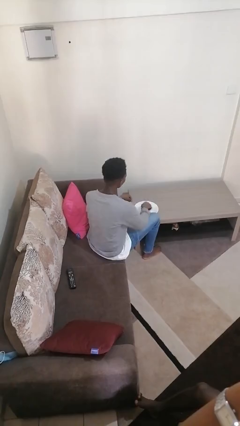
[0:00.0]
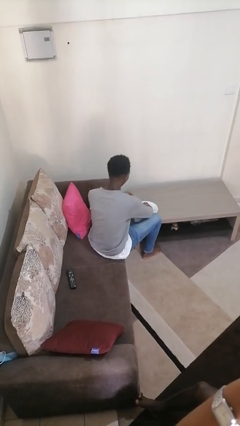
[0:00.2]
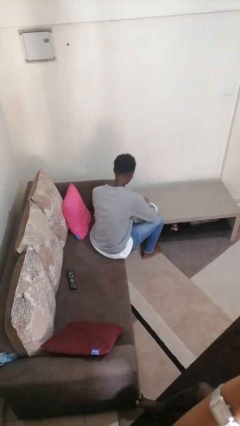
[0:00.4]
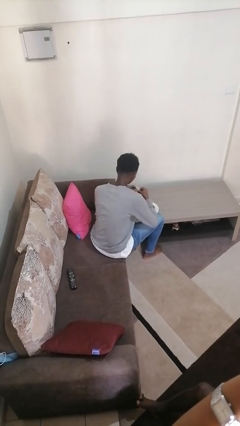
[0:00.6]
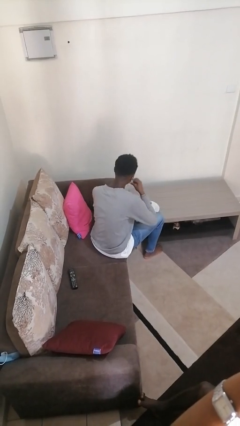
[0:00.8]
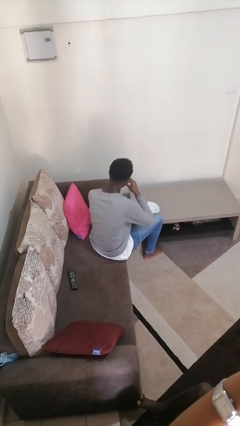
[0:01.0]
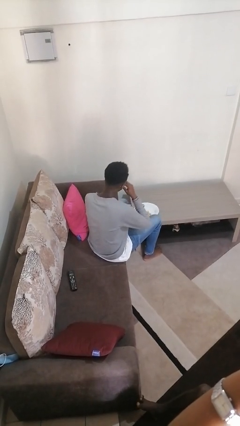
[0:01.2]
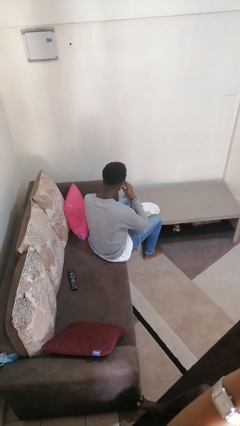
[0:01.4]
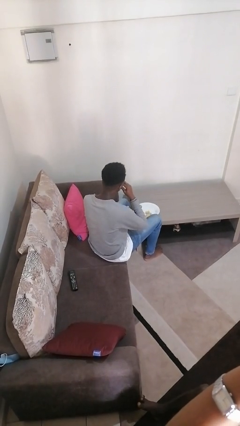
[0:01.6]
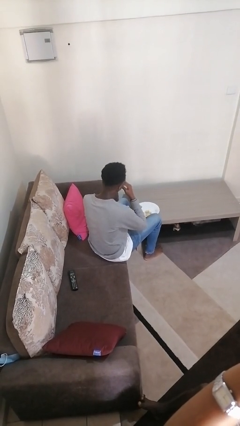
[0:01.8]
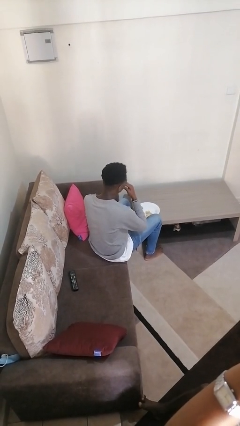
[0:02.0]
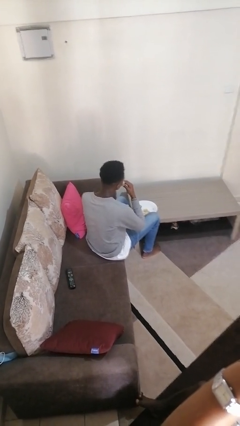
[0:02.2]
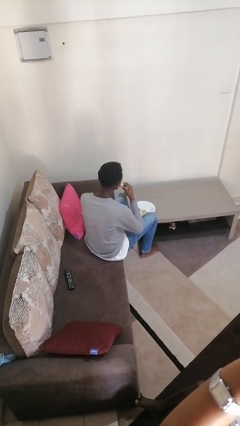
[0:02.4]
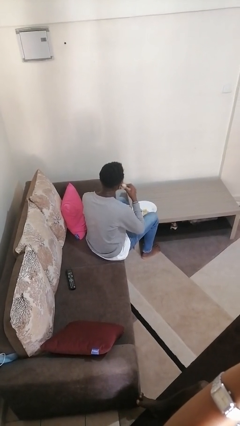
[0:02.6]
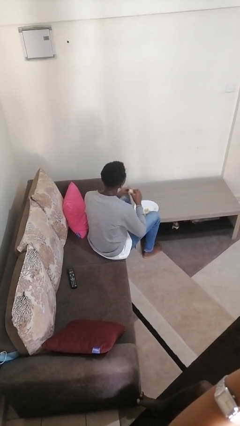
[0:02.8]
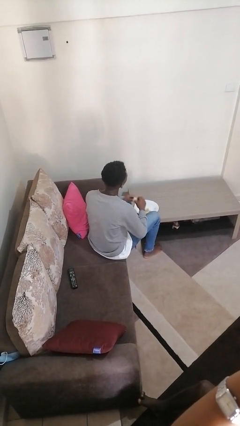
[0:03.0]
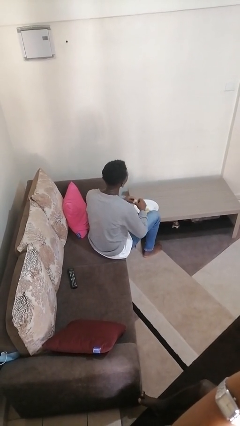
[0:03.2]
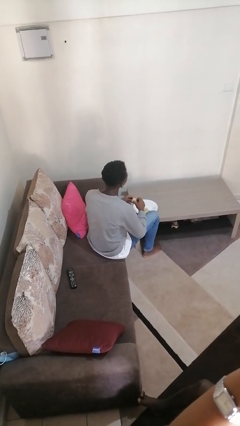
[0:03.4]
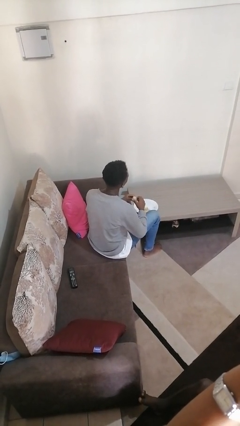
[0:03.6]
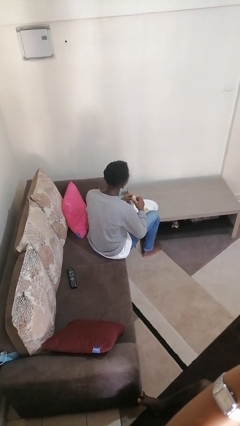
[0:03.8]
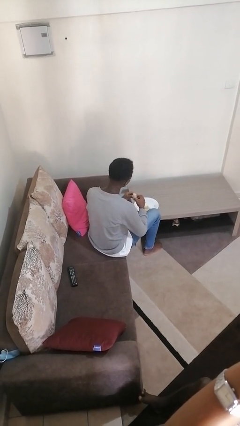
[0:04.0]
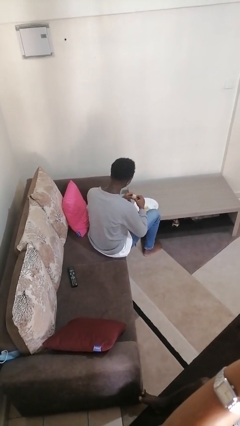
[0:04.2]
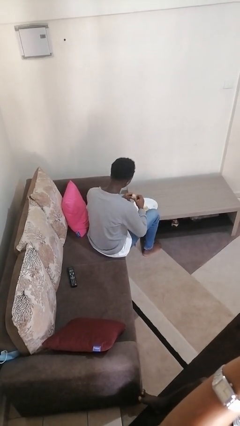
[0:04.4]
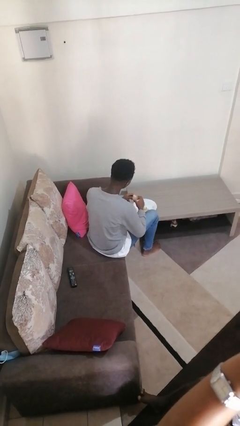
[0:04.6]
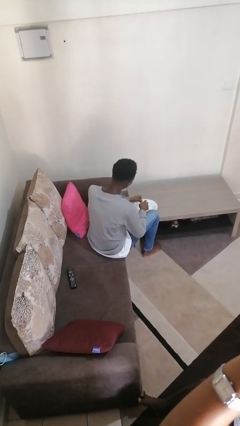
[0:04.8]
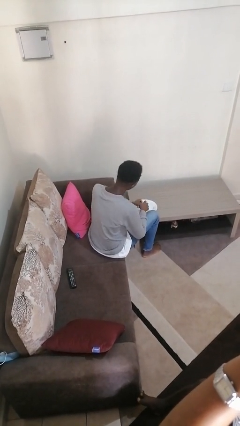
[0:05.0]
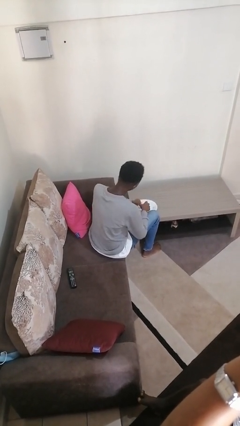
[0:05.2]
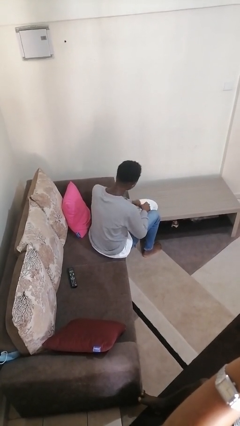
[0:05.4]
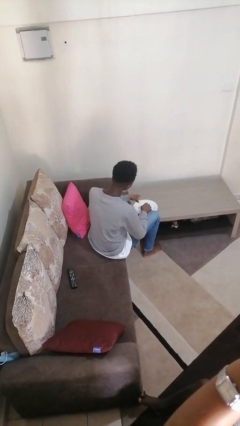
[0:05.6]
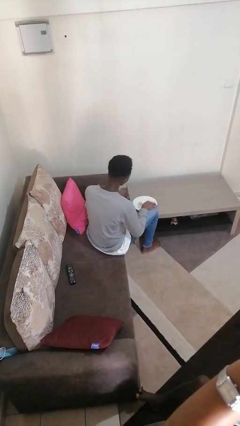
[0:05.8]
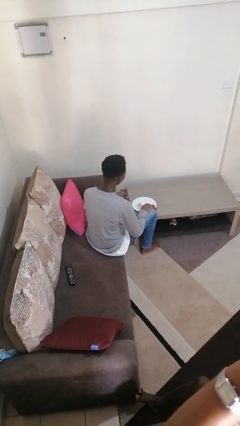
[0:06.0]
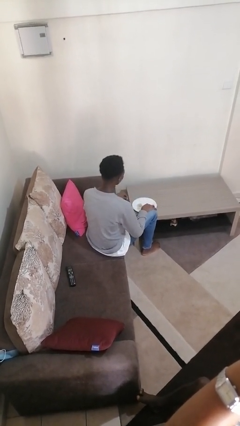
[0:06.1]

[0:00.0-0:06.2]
person eats with hands

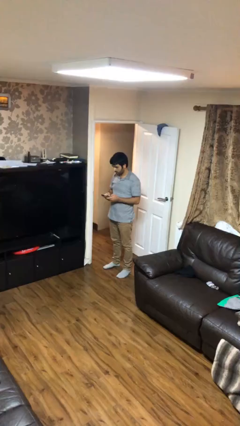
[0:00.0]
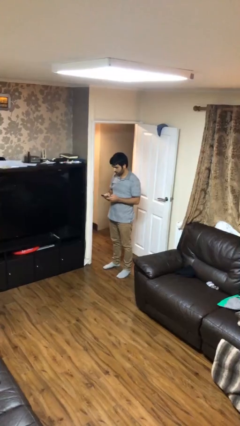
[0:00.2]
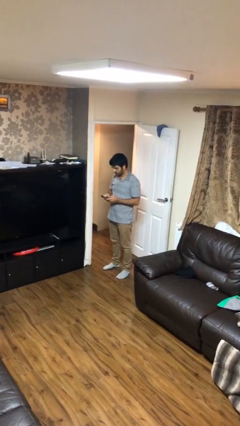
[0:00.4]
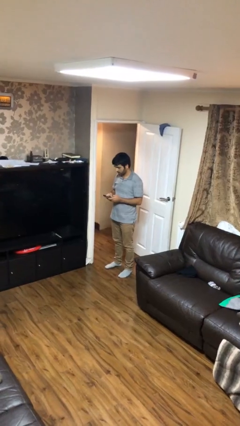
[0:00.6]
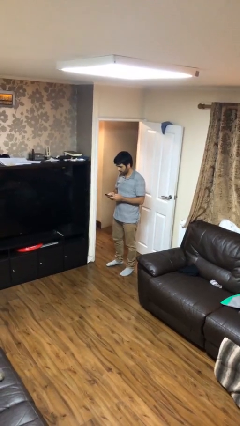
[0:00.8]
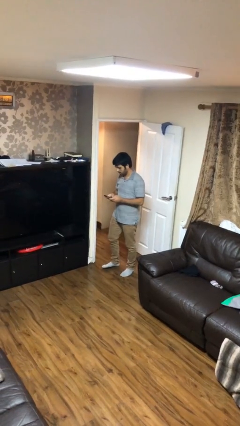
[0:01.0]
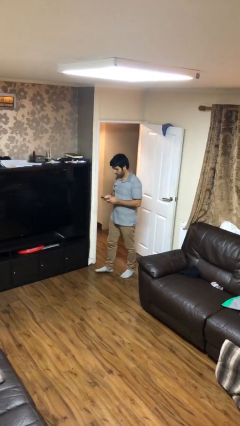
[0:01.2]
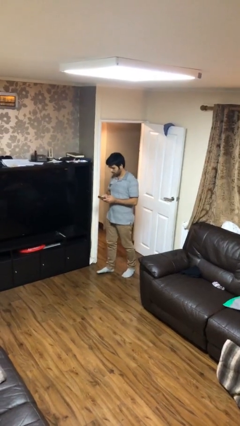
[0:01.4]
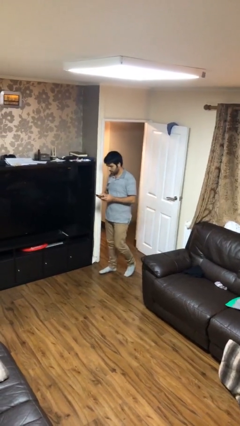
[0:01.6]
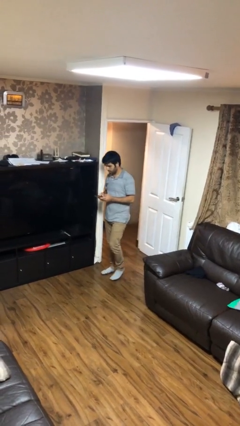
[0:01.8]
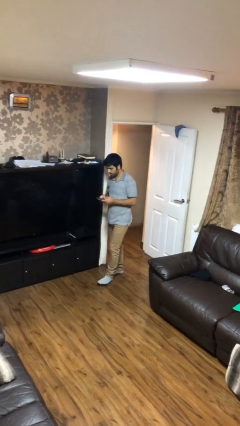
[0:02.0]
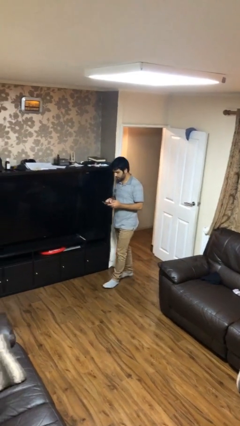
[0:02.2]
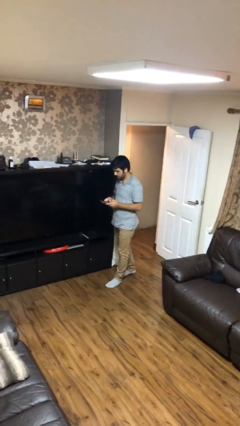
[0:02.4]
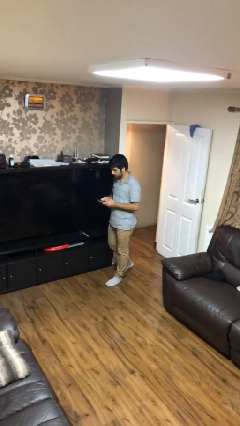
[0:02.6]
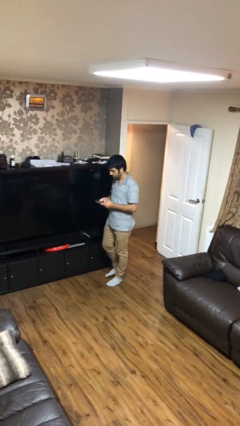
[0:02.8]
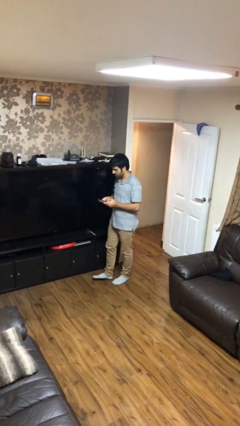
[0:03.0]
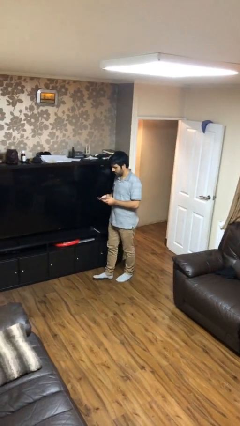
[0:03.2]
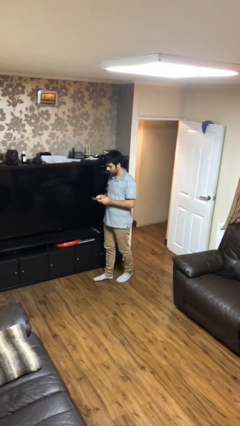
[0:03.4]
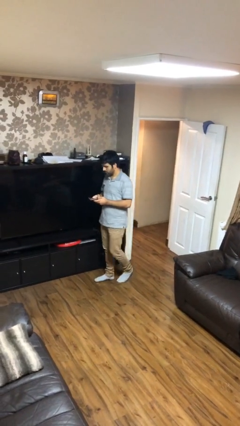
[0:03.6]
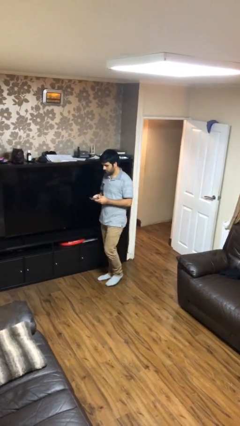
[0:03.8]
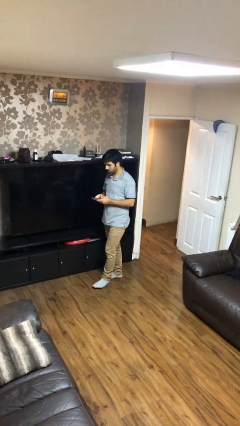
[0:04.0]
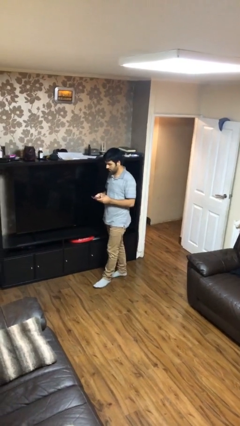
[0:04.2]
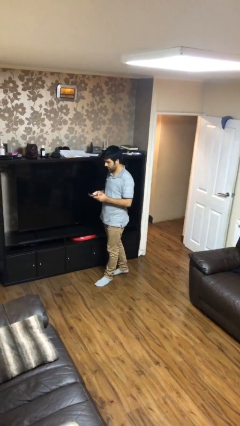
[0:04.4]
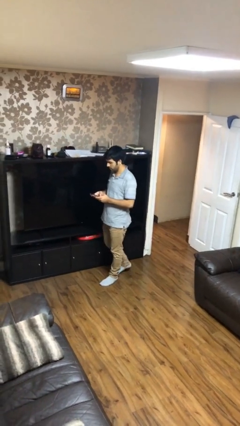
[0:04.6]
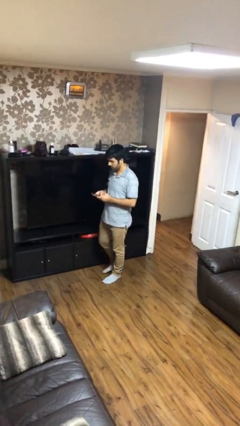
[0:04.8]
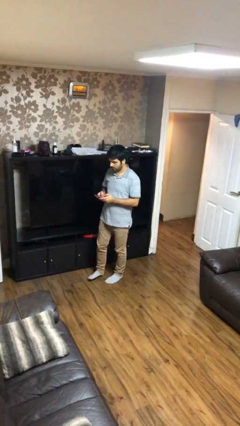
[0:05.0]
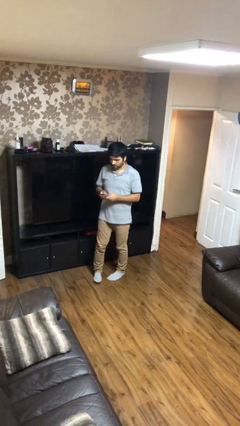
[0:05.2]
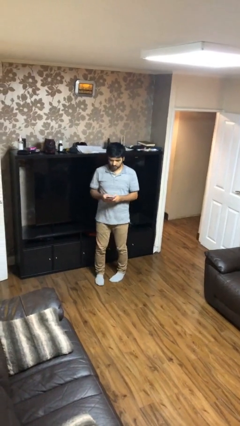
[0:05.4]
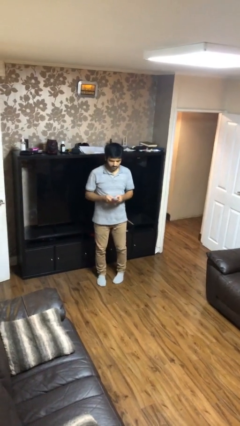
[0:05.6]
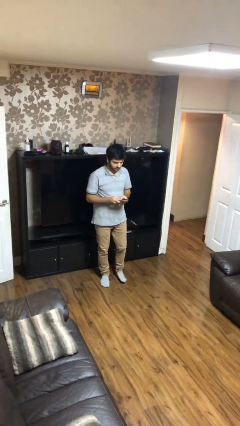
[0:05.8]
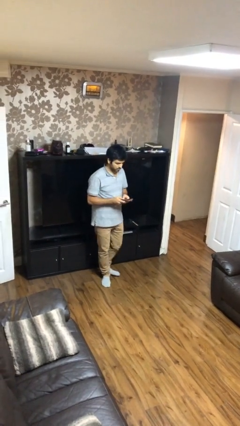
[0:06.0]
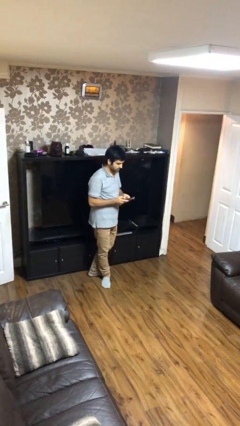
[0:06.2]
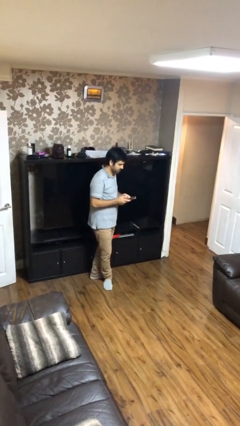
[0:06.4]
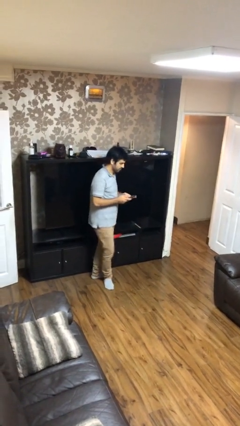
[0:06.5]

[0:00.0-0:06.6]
person texts on phone

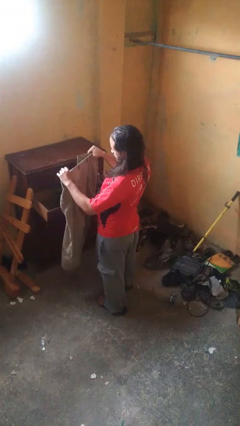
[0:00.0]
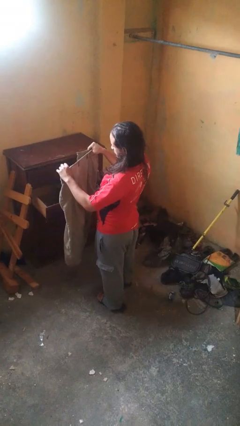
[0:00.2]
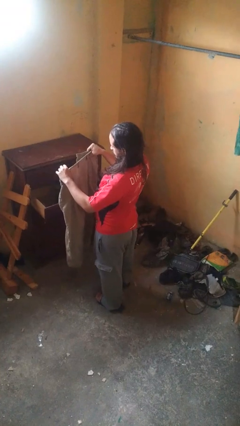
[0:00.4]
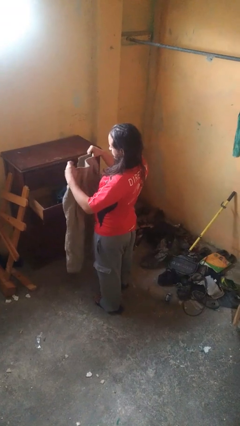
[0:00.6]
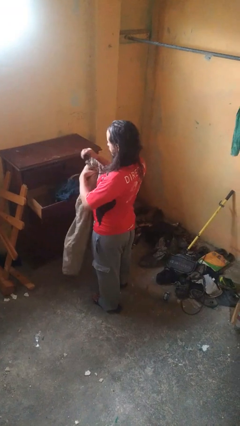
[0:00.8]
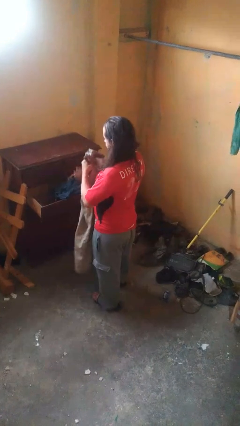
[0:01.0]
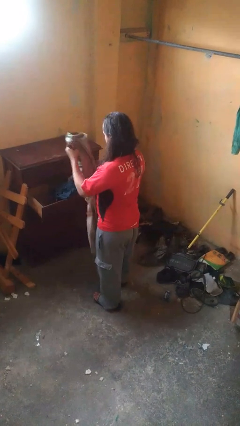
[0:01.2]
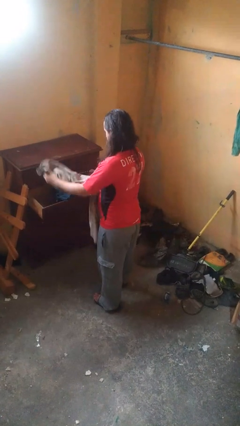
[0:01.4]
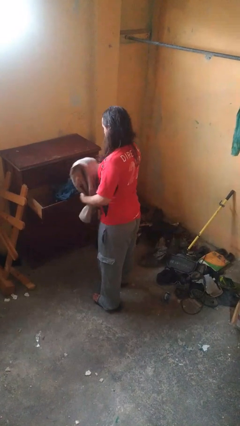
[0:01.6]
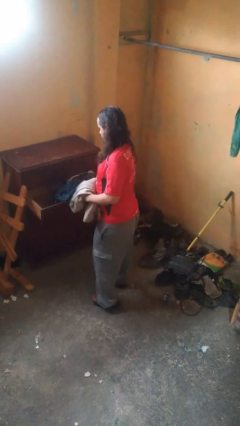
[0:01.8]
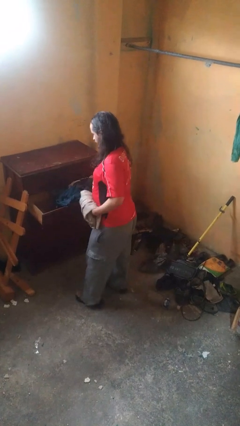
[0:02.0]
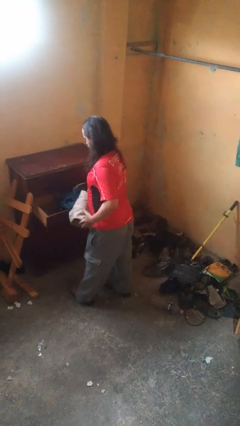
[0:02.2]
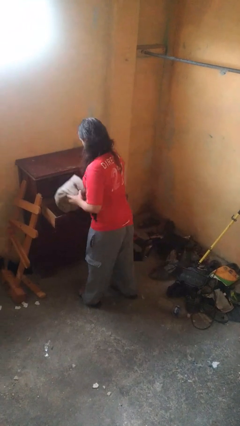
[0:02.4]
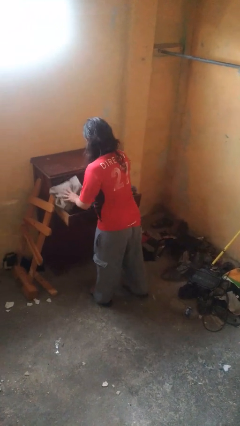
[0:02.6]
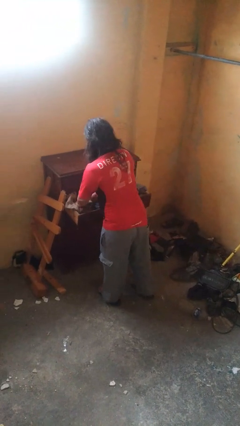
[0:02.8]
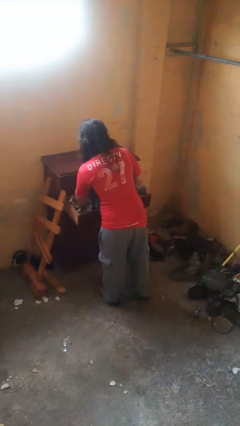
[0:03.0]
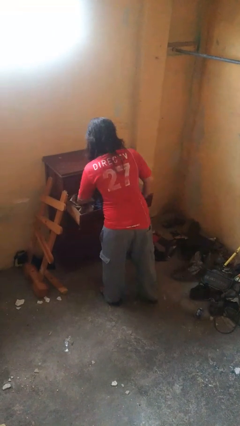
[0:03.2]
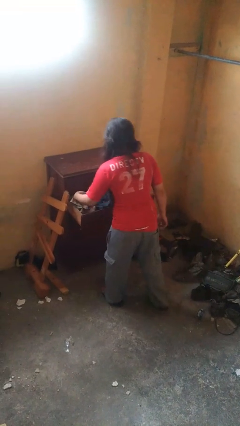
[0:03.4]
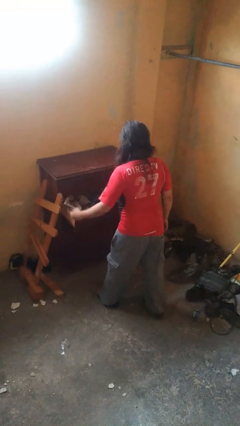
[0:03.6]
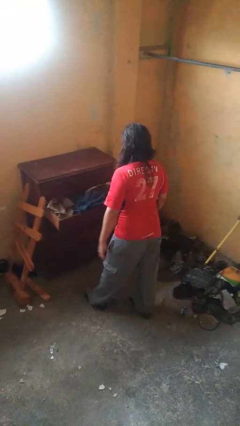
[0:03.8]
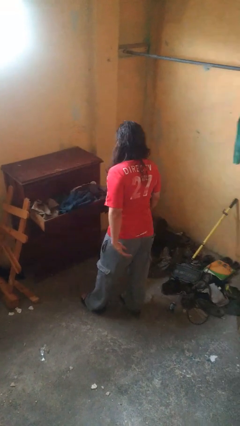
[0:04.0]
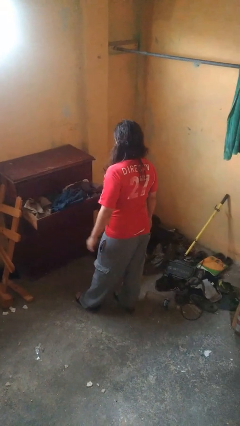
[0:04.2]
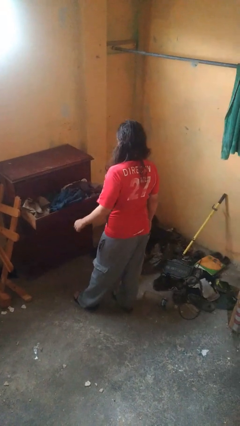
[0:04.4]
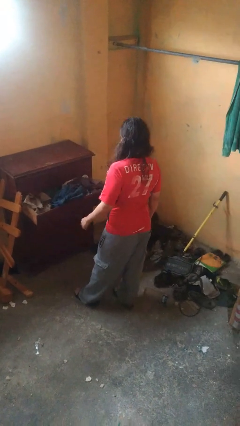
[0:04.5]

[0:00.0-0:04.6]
person puts clothes into dresser
